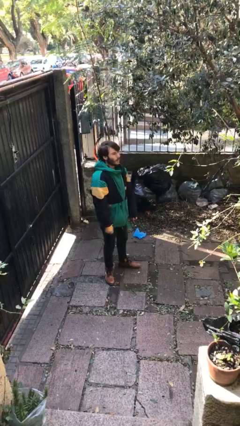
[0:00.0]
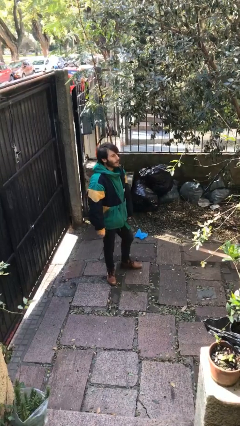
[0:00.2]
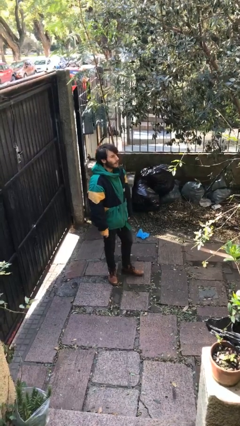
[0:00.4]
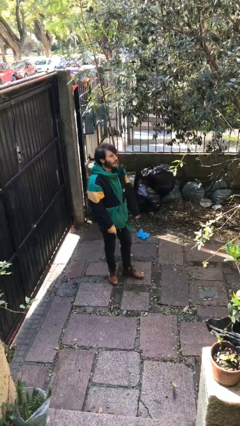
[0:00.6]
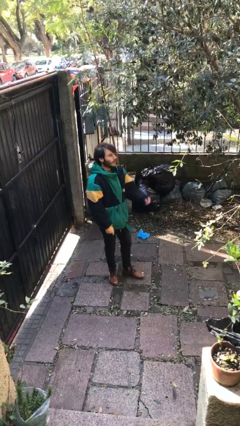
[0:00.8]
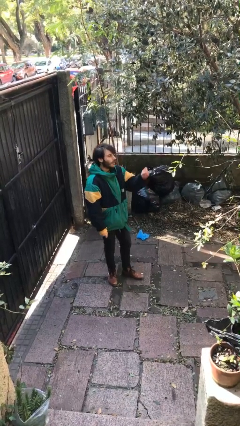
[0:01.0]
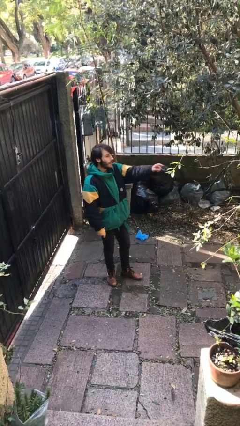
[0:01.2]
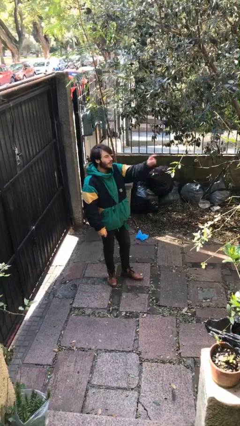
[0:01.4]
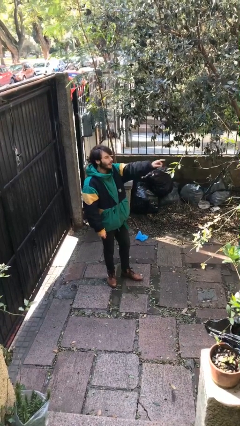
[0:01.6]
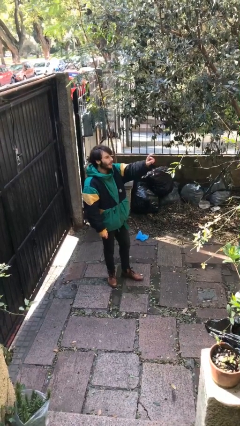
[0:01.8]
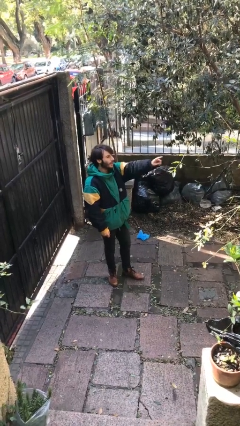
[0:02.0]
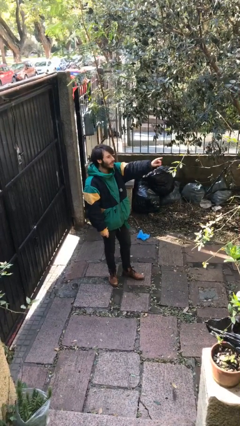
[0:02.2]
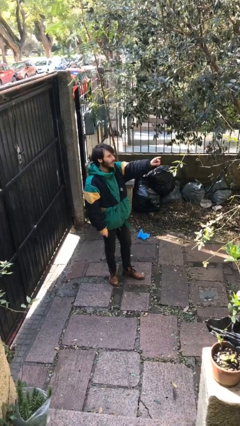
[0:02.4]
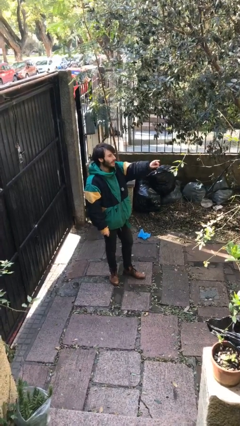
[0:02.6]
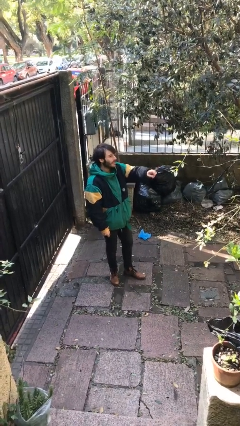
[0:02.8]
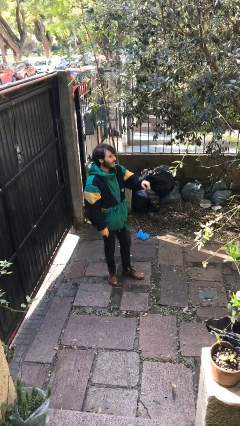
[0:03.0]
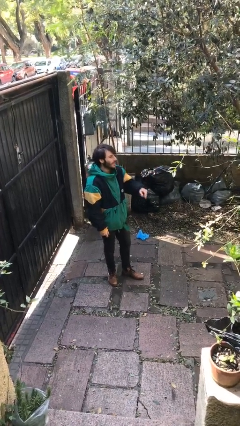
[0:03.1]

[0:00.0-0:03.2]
person points at person

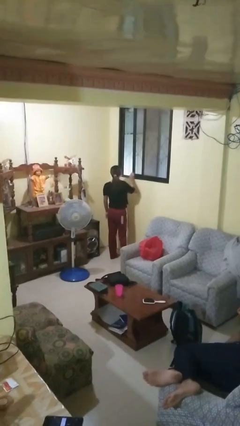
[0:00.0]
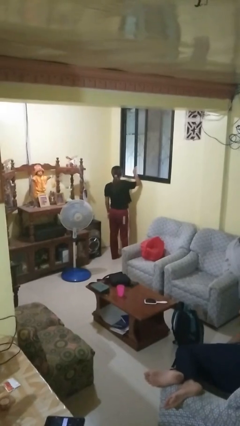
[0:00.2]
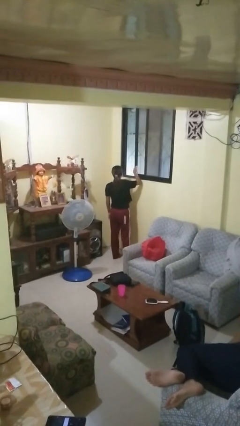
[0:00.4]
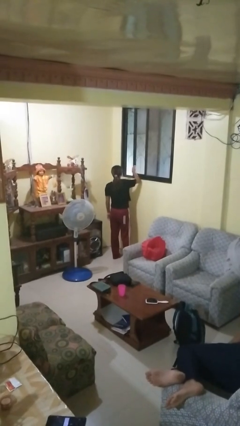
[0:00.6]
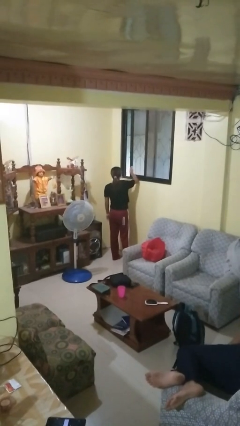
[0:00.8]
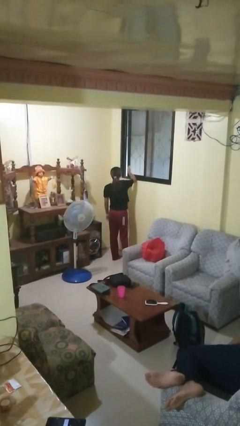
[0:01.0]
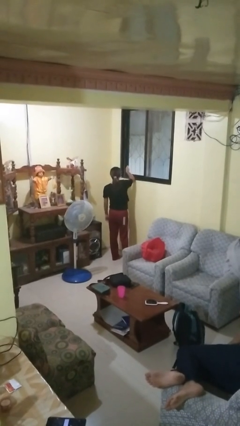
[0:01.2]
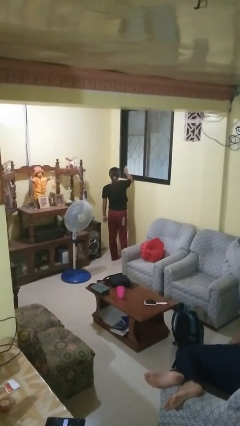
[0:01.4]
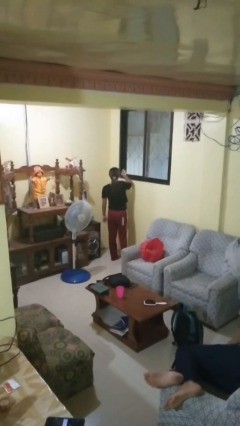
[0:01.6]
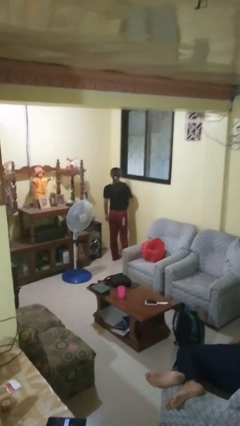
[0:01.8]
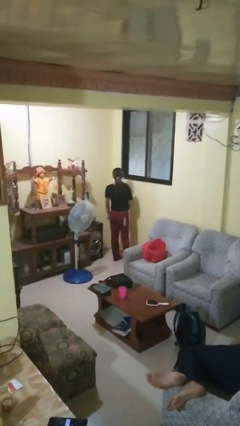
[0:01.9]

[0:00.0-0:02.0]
person closes home window

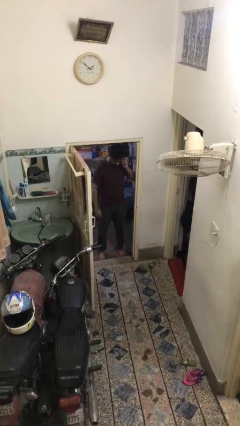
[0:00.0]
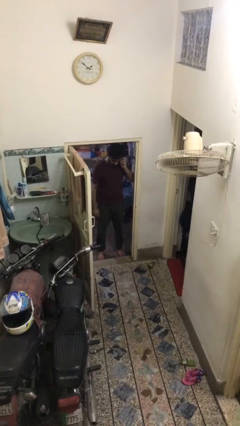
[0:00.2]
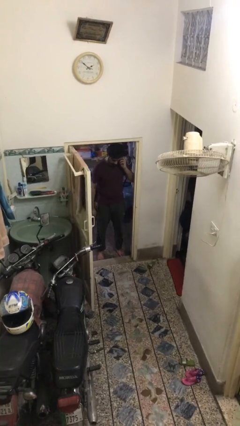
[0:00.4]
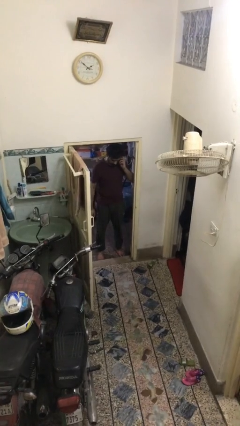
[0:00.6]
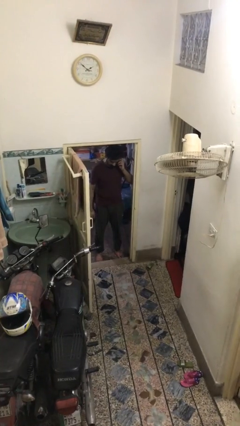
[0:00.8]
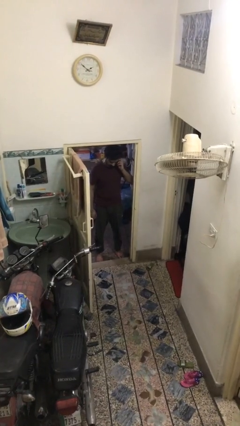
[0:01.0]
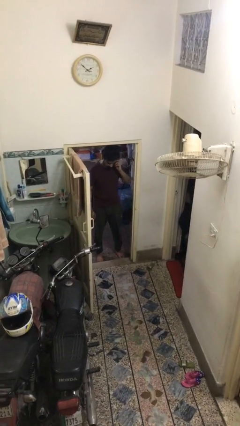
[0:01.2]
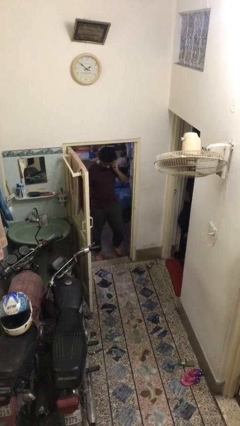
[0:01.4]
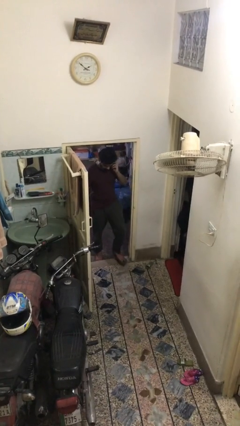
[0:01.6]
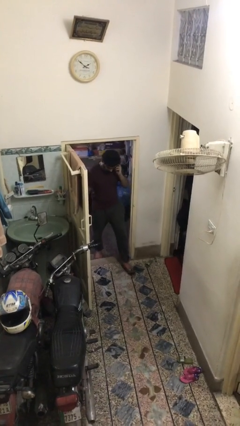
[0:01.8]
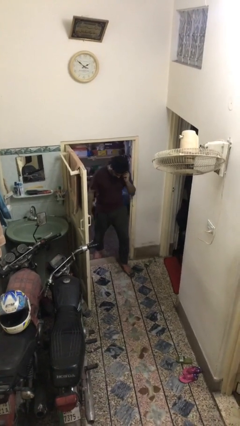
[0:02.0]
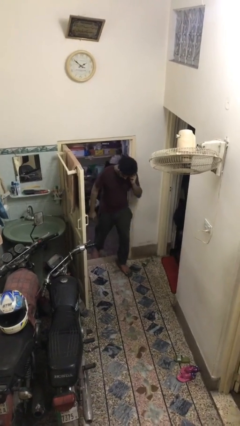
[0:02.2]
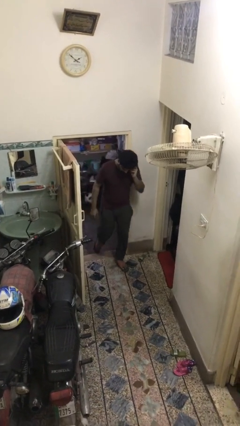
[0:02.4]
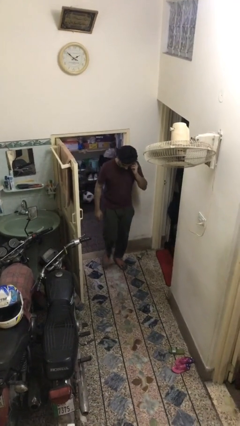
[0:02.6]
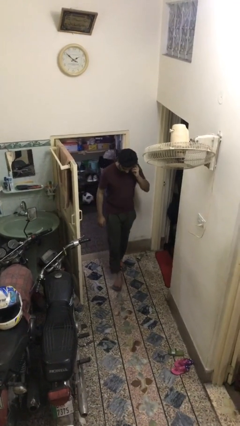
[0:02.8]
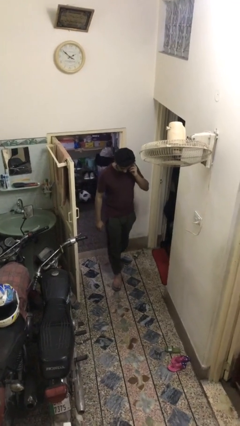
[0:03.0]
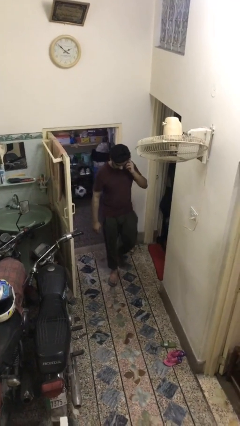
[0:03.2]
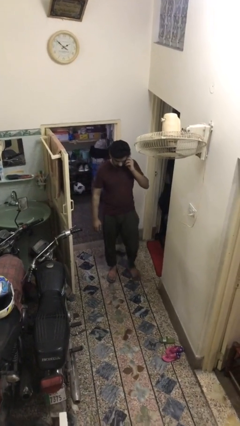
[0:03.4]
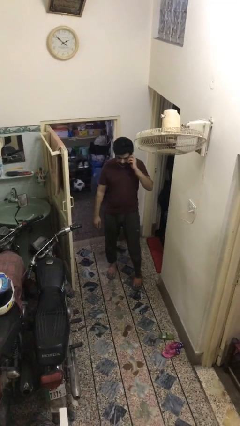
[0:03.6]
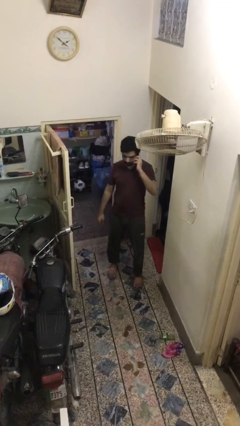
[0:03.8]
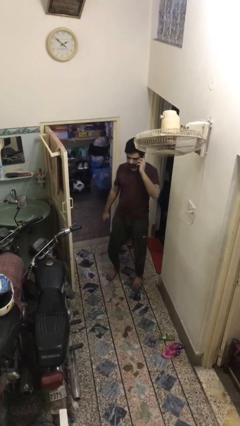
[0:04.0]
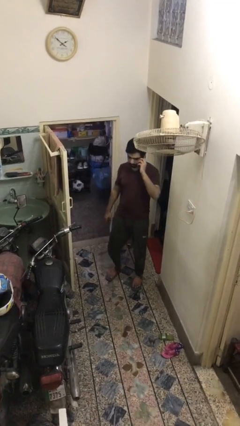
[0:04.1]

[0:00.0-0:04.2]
person enters scene through structure

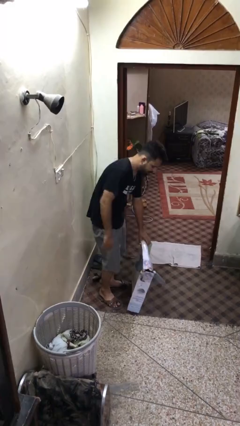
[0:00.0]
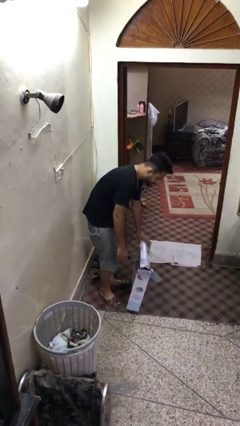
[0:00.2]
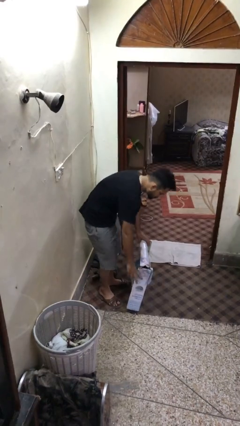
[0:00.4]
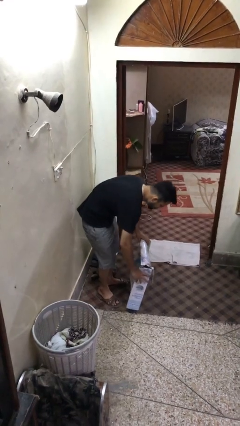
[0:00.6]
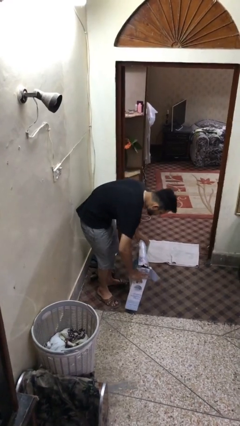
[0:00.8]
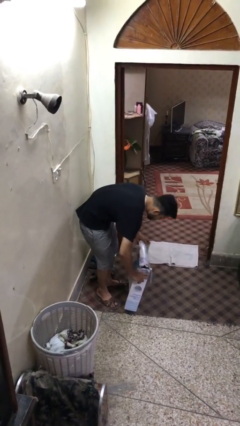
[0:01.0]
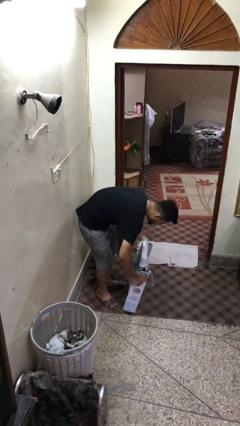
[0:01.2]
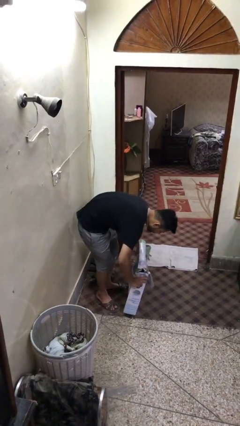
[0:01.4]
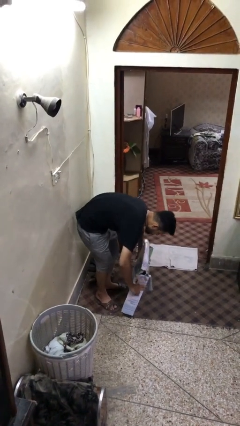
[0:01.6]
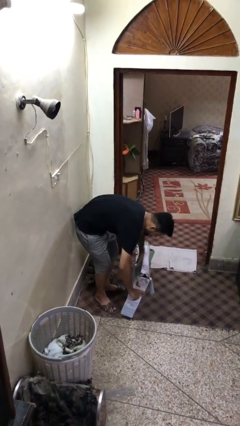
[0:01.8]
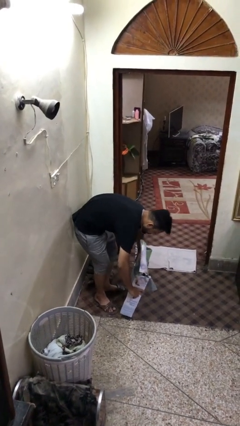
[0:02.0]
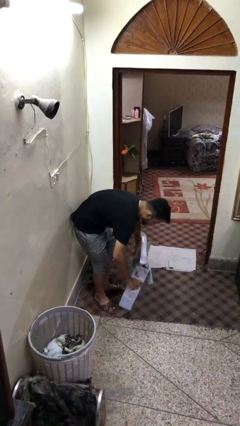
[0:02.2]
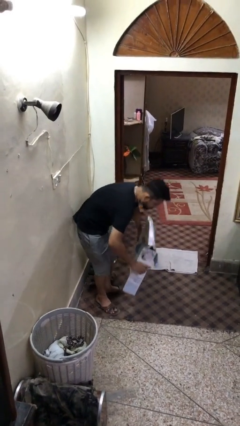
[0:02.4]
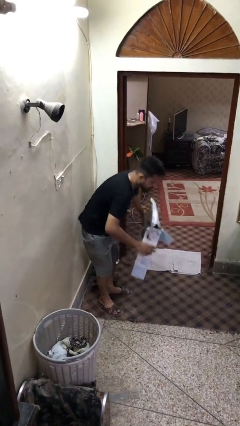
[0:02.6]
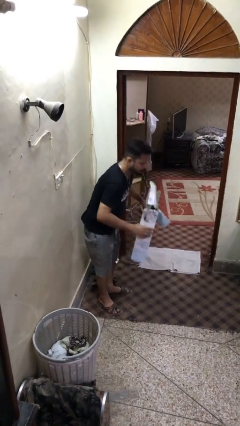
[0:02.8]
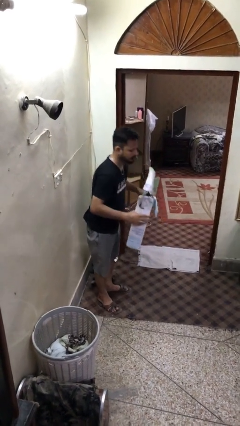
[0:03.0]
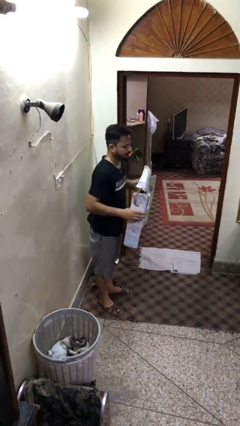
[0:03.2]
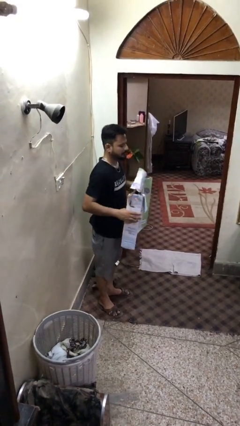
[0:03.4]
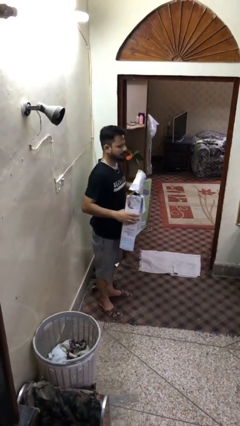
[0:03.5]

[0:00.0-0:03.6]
person picks up object from floor

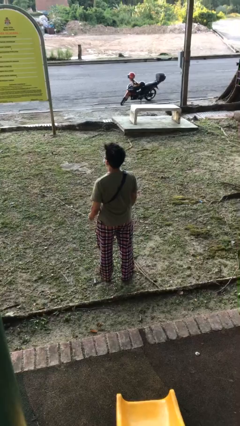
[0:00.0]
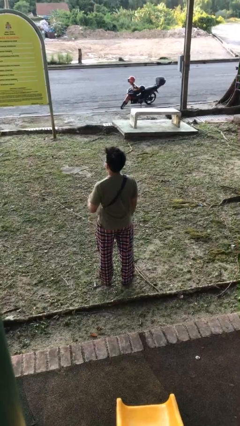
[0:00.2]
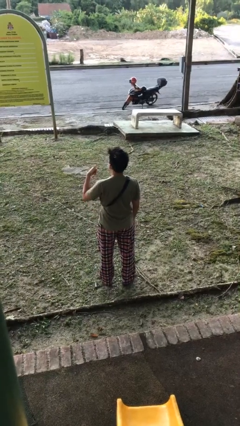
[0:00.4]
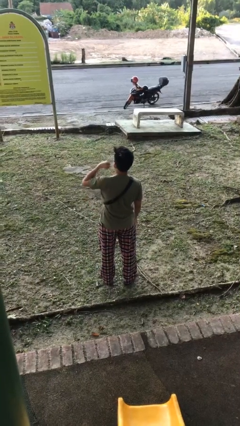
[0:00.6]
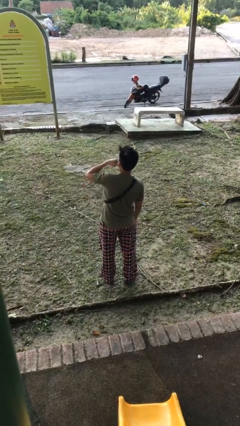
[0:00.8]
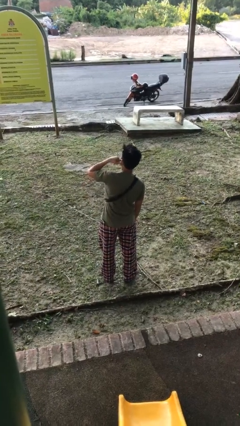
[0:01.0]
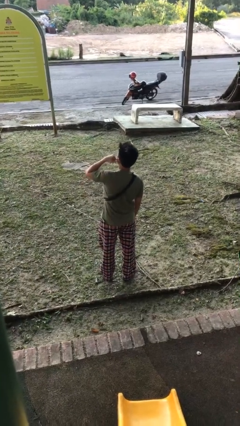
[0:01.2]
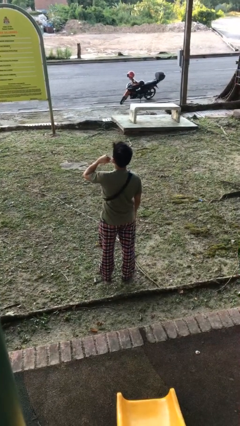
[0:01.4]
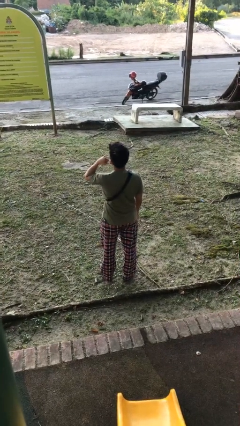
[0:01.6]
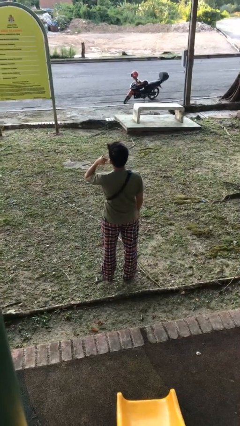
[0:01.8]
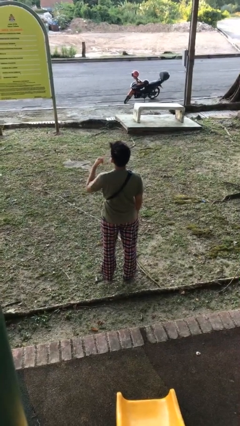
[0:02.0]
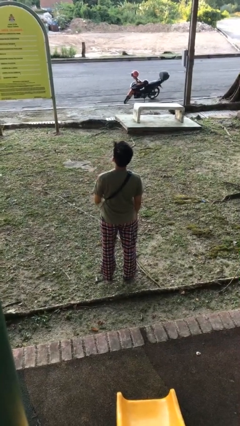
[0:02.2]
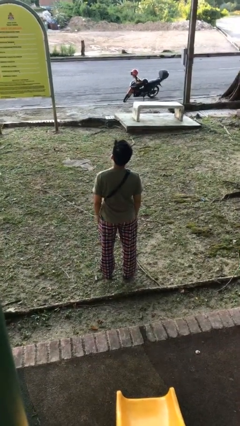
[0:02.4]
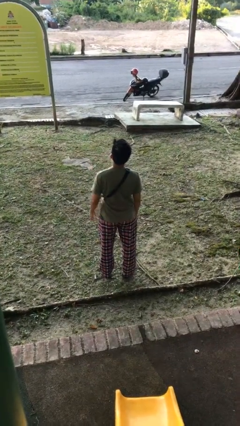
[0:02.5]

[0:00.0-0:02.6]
person gestures call me

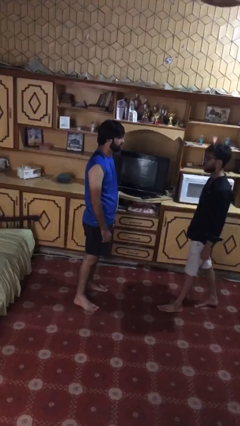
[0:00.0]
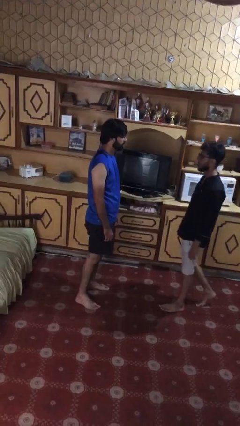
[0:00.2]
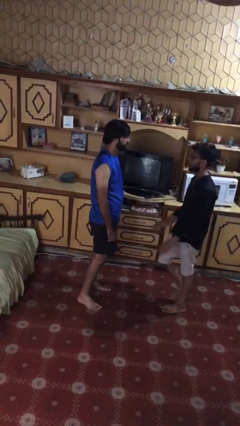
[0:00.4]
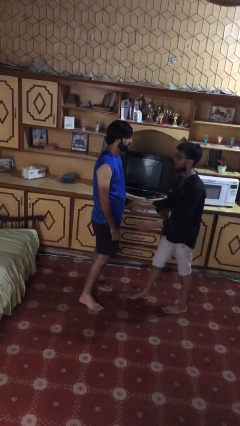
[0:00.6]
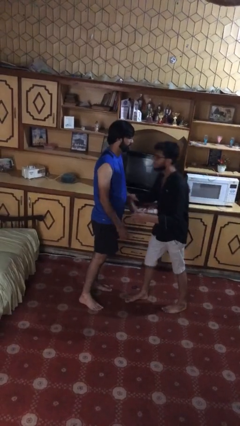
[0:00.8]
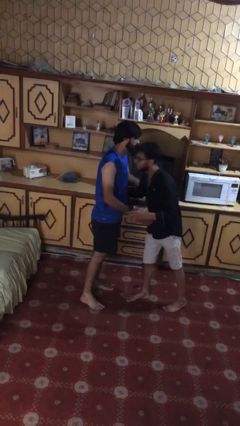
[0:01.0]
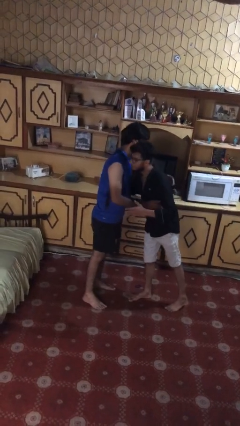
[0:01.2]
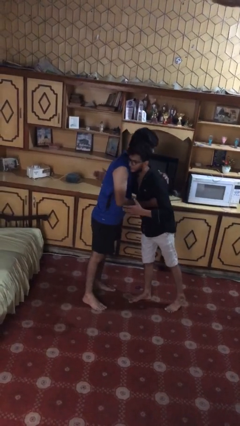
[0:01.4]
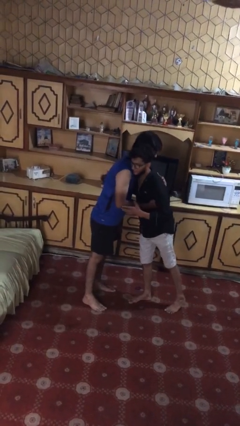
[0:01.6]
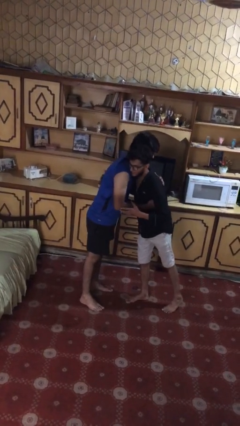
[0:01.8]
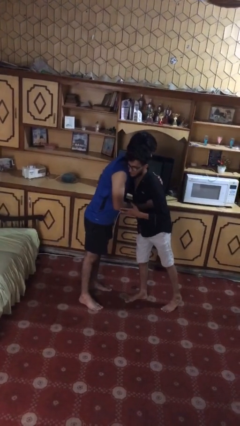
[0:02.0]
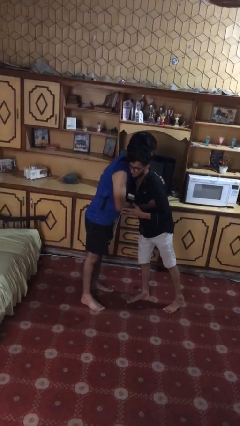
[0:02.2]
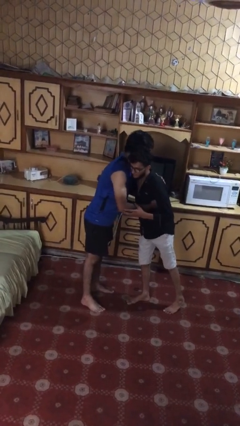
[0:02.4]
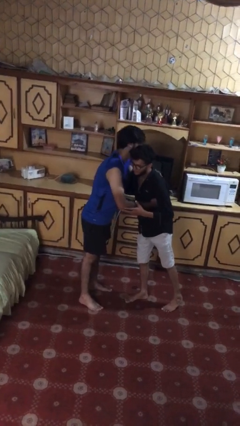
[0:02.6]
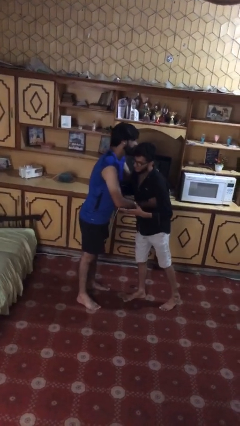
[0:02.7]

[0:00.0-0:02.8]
person embraces person
